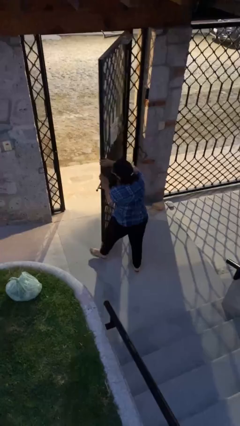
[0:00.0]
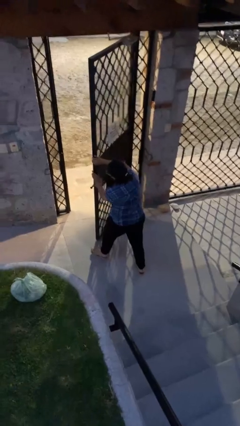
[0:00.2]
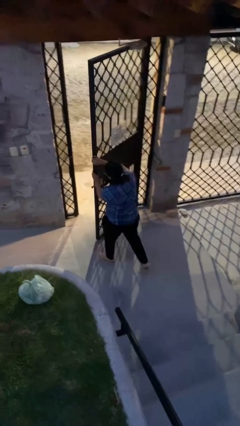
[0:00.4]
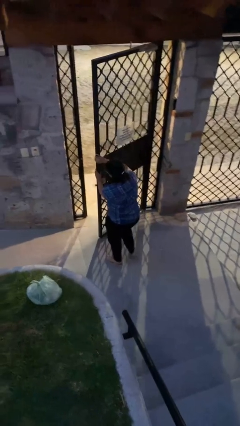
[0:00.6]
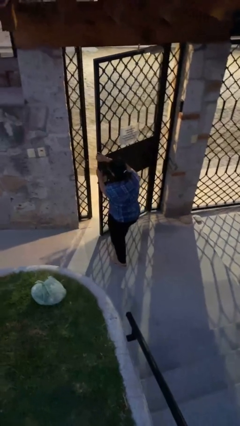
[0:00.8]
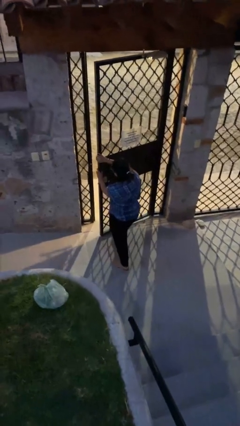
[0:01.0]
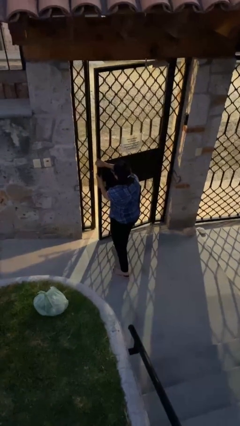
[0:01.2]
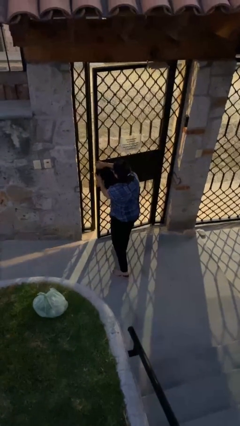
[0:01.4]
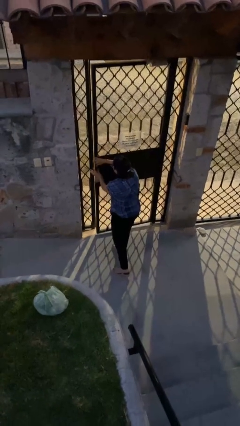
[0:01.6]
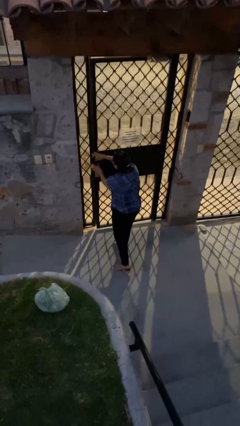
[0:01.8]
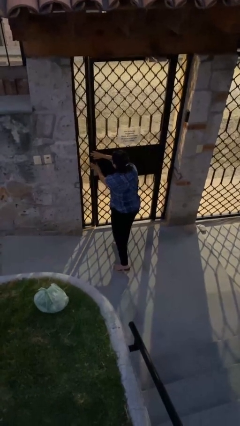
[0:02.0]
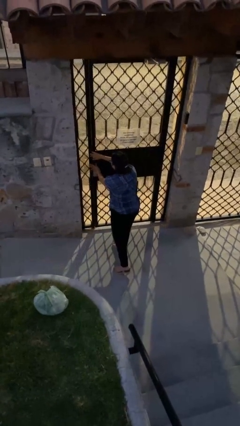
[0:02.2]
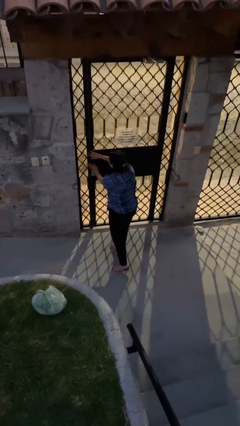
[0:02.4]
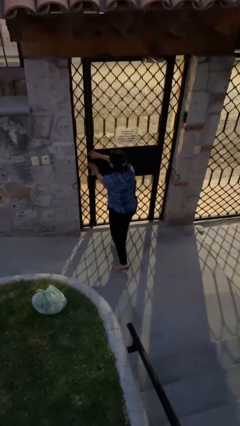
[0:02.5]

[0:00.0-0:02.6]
person closes facility door

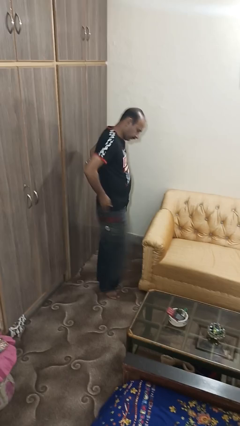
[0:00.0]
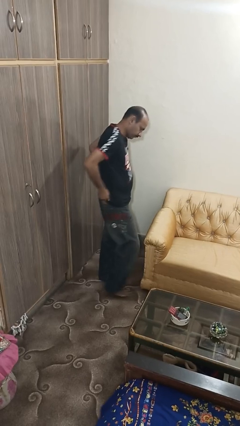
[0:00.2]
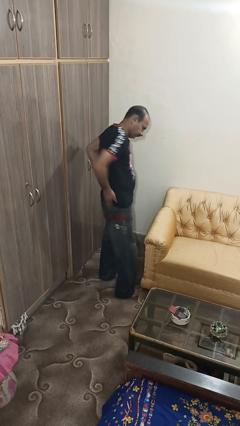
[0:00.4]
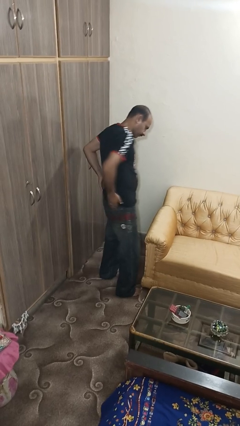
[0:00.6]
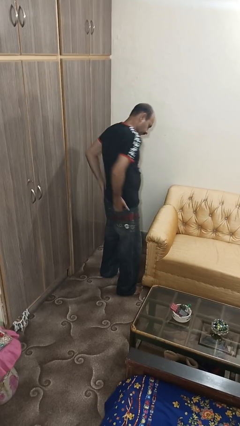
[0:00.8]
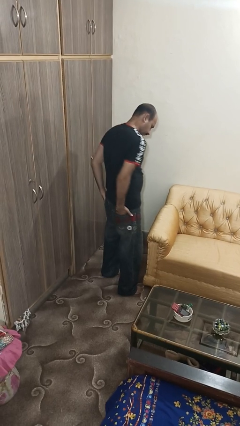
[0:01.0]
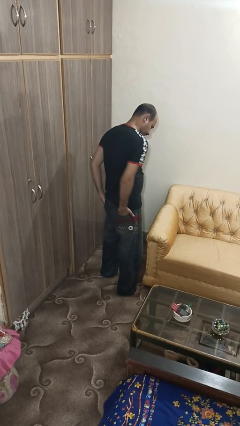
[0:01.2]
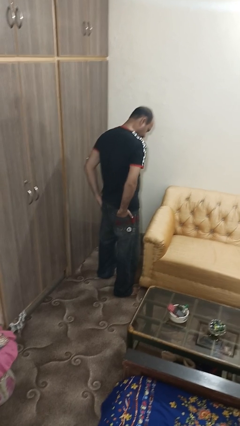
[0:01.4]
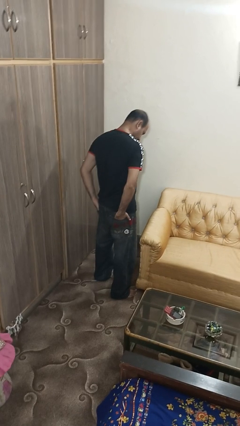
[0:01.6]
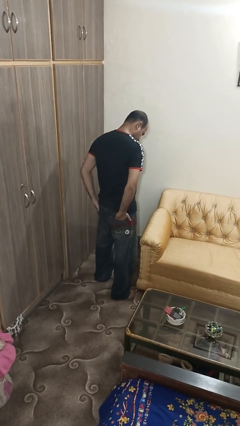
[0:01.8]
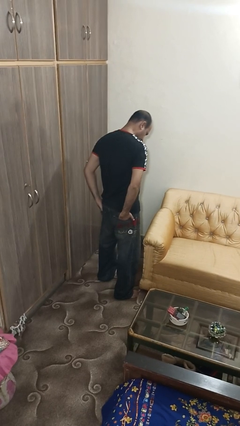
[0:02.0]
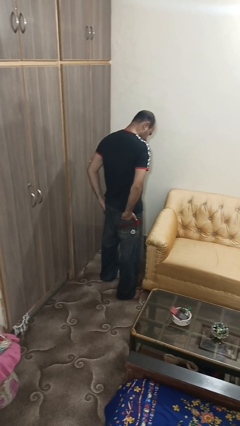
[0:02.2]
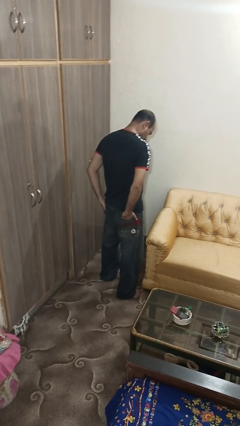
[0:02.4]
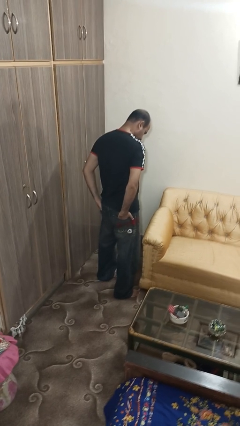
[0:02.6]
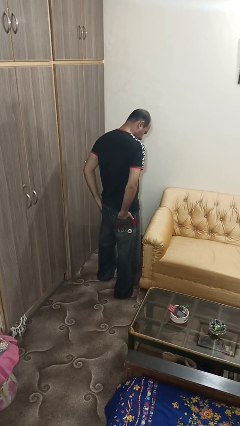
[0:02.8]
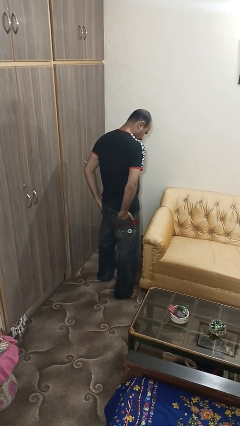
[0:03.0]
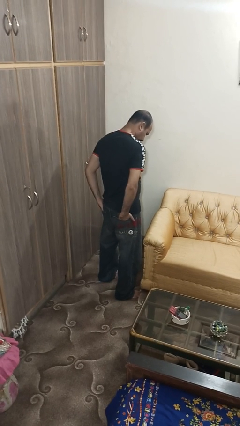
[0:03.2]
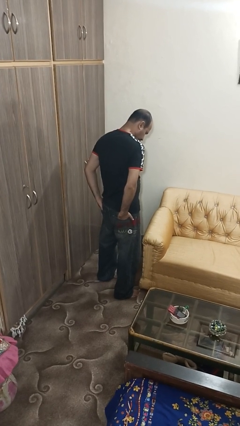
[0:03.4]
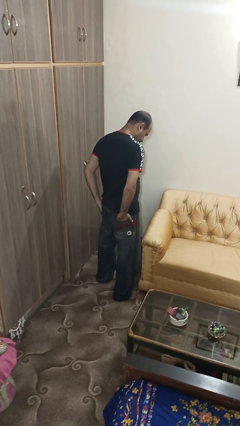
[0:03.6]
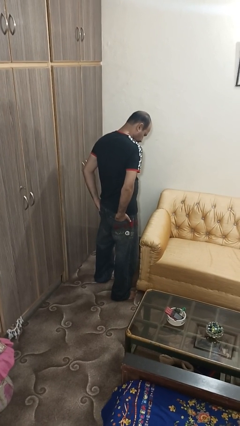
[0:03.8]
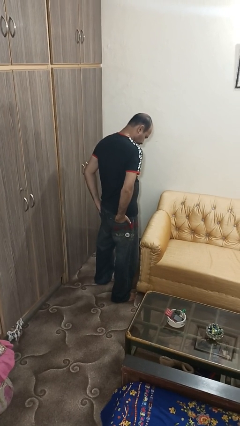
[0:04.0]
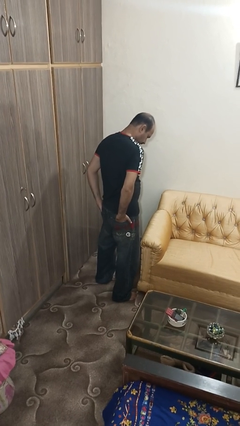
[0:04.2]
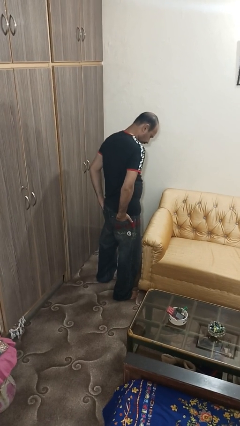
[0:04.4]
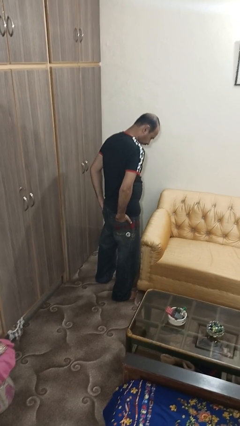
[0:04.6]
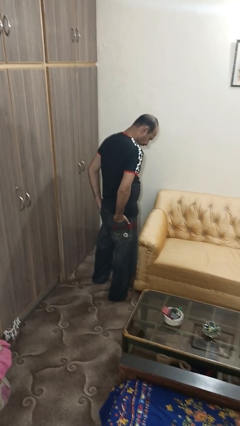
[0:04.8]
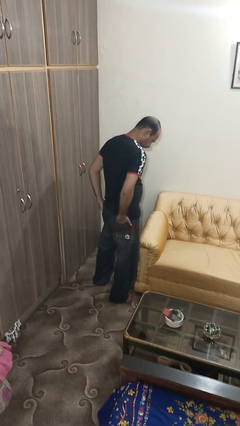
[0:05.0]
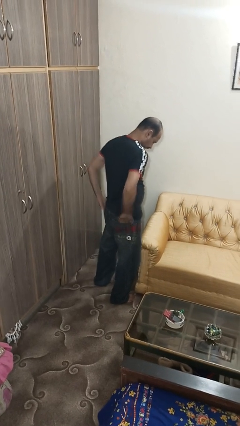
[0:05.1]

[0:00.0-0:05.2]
person puts hands in back pockets

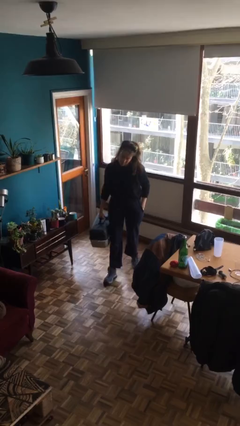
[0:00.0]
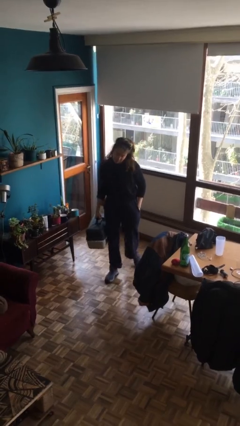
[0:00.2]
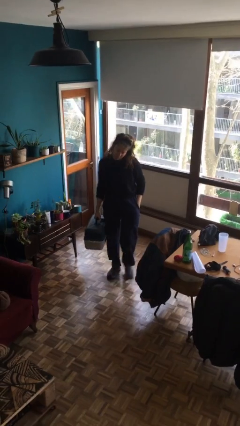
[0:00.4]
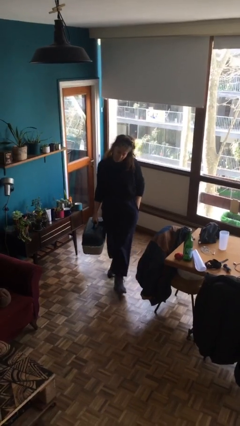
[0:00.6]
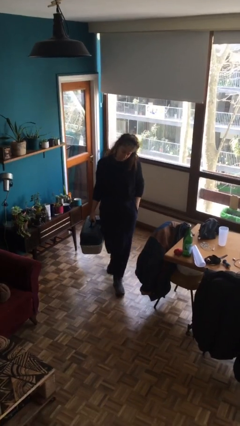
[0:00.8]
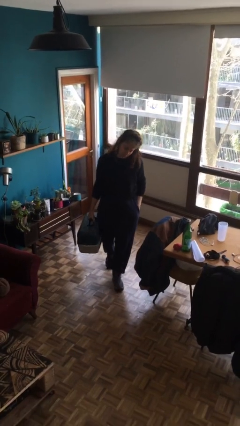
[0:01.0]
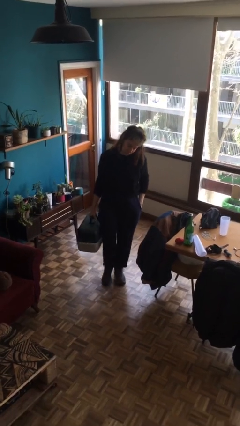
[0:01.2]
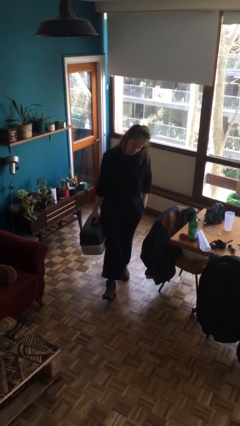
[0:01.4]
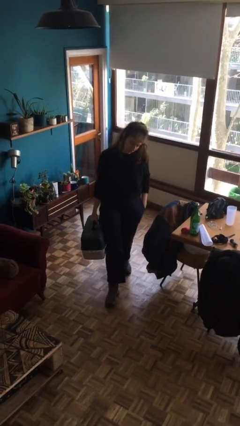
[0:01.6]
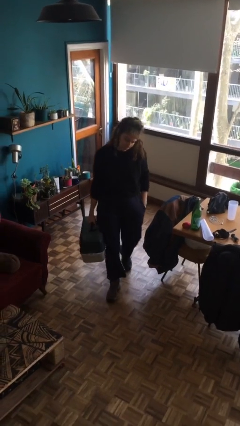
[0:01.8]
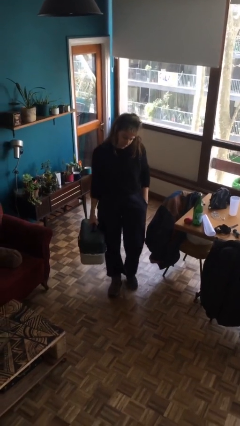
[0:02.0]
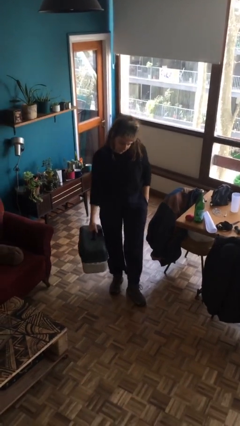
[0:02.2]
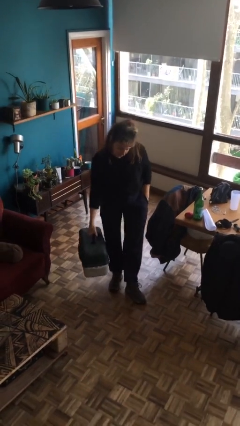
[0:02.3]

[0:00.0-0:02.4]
person carries heavy object

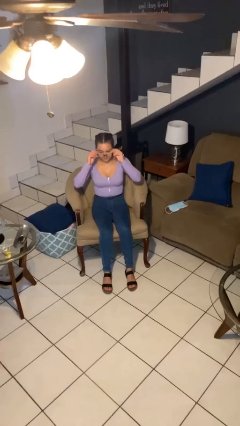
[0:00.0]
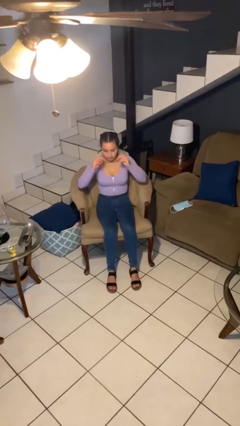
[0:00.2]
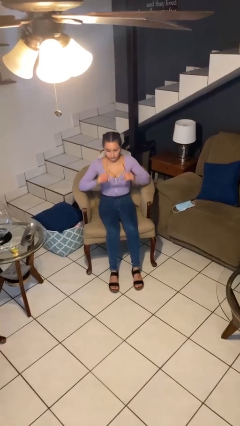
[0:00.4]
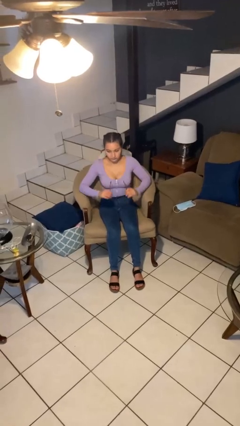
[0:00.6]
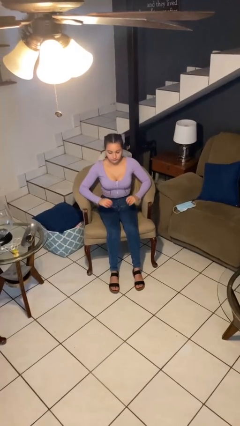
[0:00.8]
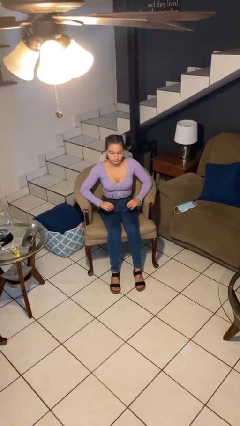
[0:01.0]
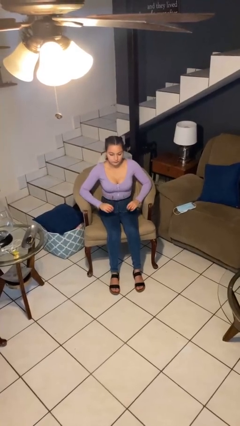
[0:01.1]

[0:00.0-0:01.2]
person takes off glasses

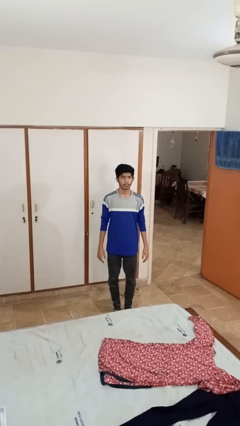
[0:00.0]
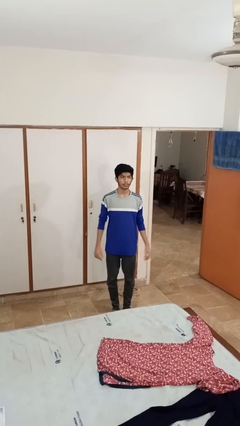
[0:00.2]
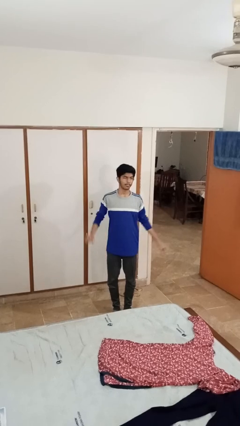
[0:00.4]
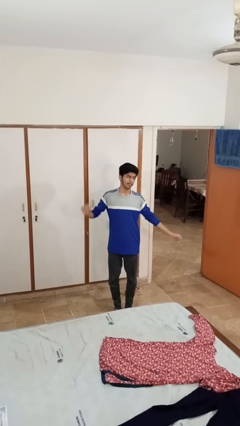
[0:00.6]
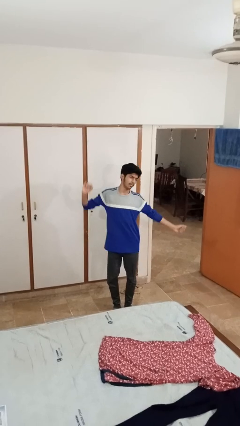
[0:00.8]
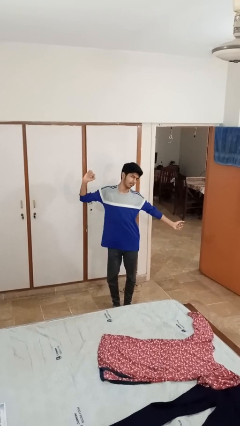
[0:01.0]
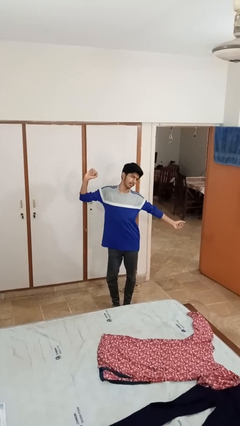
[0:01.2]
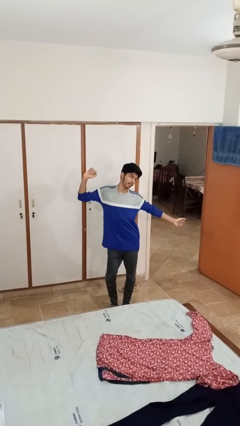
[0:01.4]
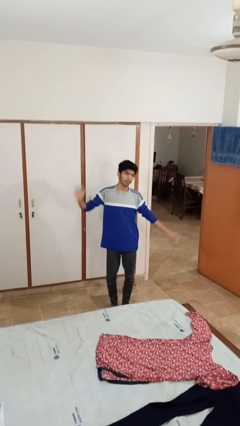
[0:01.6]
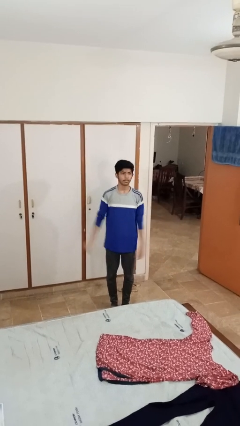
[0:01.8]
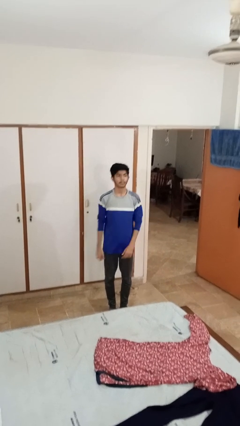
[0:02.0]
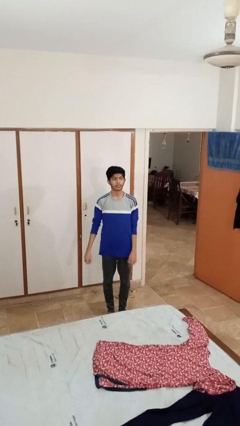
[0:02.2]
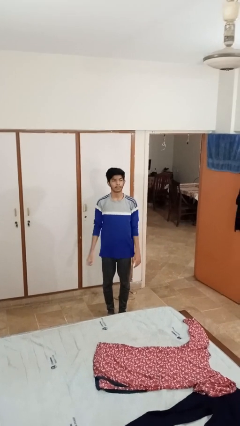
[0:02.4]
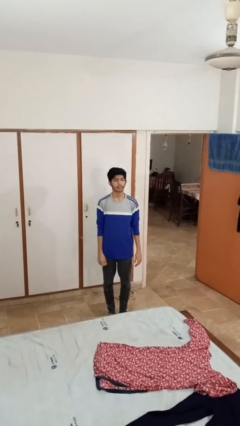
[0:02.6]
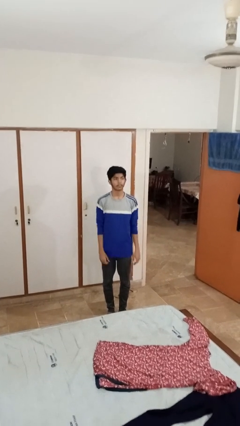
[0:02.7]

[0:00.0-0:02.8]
person stretches arms to side

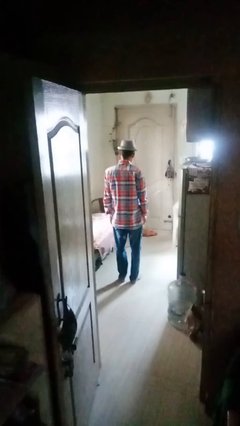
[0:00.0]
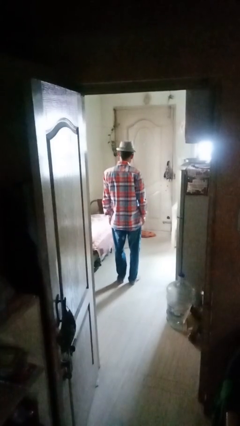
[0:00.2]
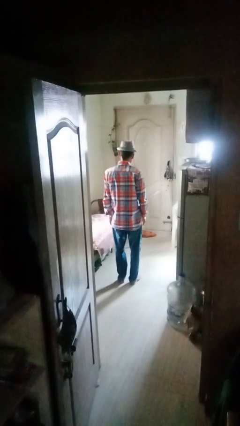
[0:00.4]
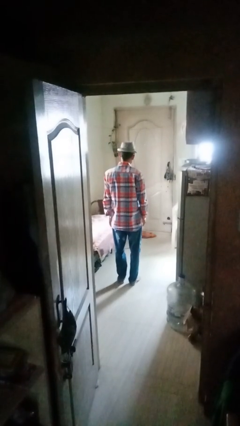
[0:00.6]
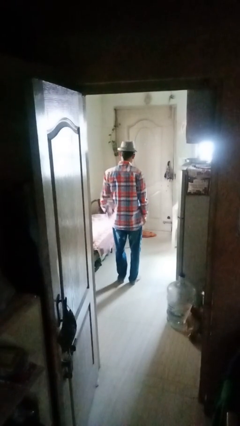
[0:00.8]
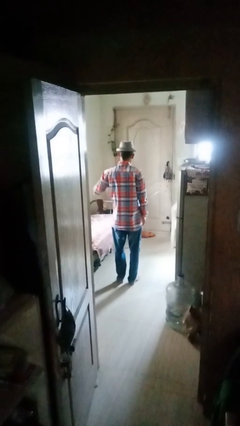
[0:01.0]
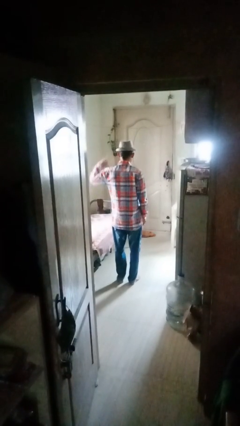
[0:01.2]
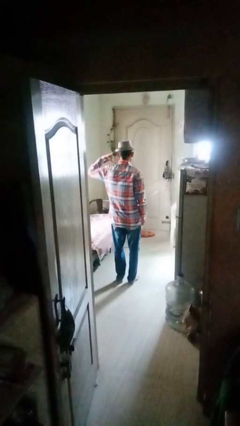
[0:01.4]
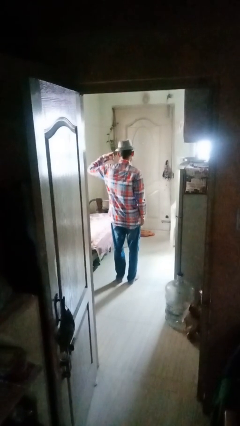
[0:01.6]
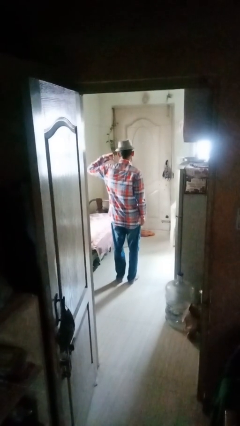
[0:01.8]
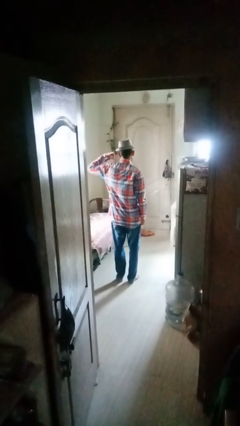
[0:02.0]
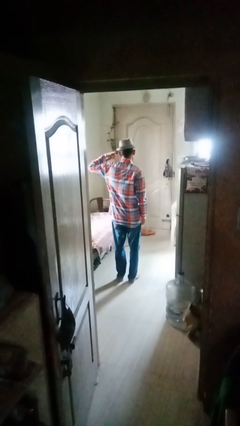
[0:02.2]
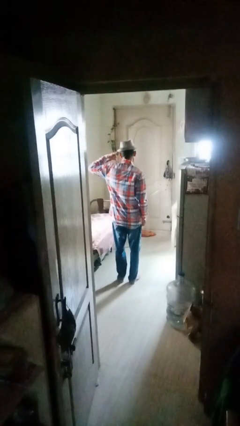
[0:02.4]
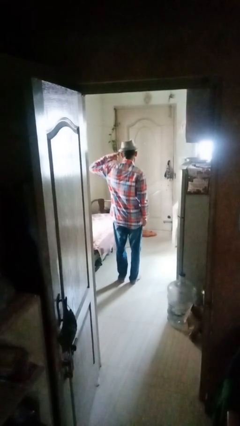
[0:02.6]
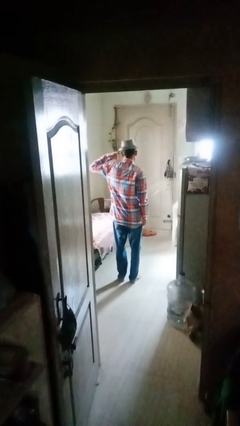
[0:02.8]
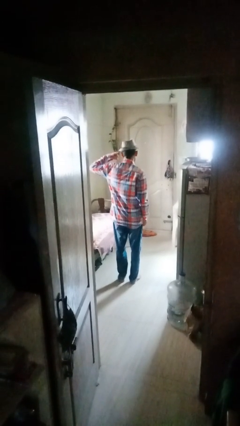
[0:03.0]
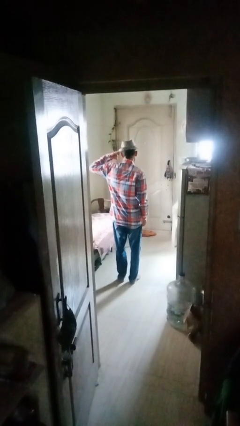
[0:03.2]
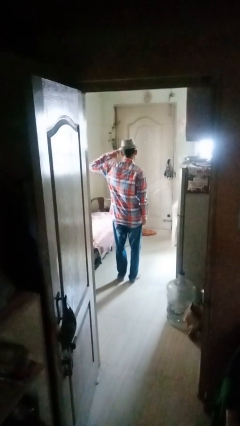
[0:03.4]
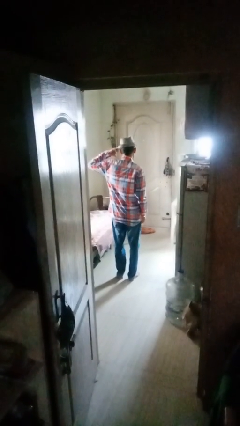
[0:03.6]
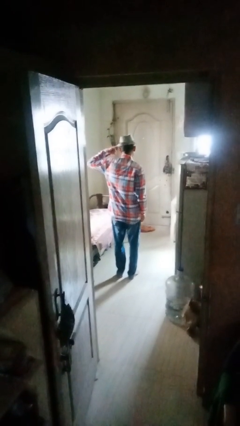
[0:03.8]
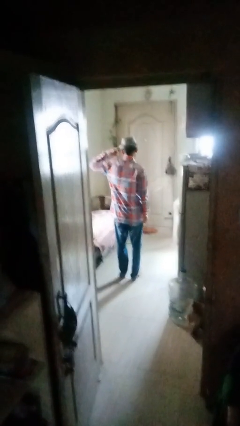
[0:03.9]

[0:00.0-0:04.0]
person gestures call me
